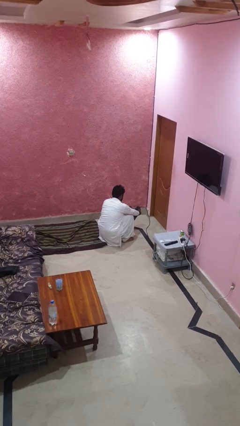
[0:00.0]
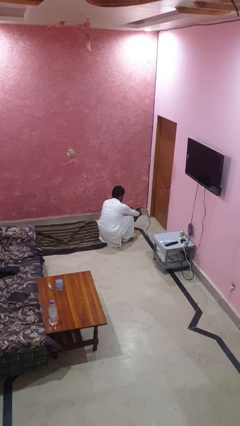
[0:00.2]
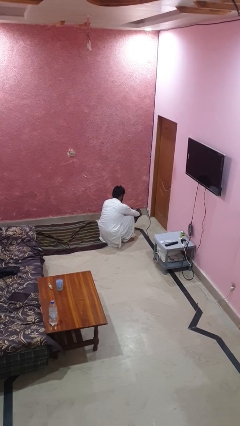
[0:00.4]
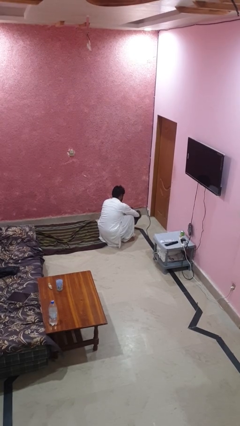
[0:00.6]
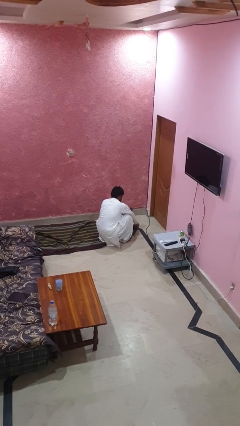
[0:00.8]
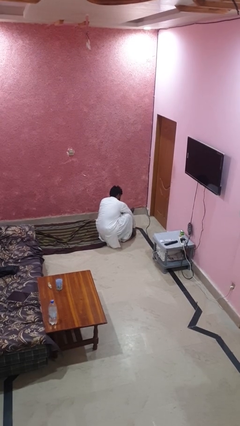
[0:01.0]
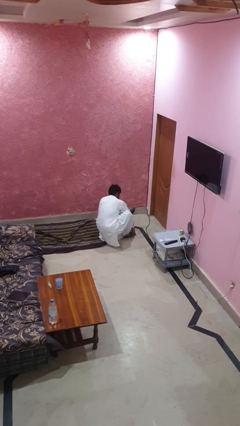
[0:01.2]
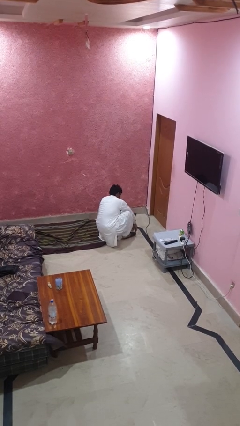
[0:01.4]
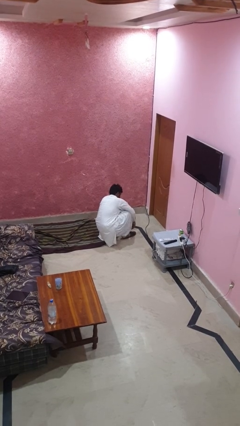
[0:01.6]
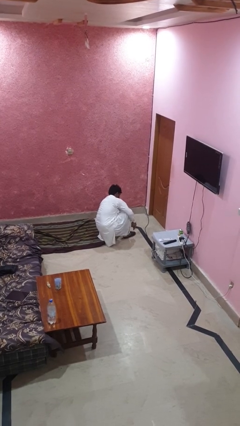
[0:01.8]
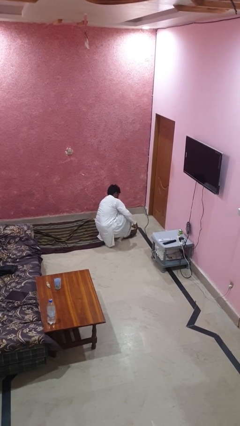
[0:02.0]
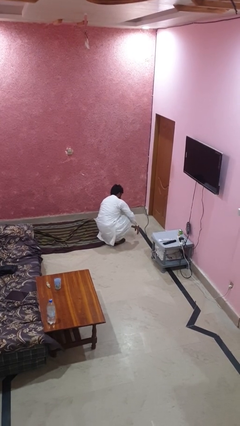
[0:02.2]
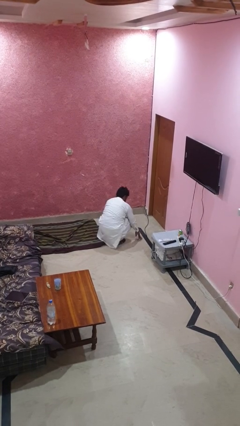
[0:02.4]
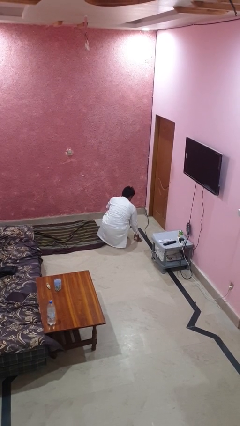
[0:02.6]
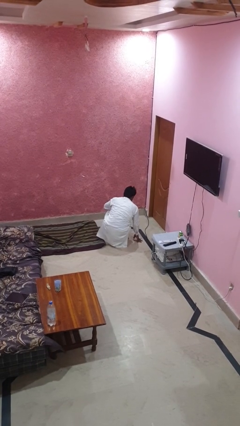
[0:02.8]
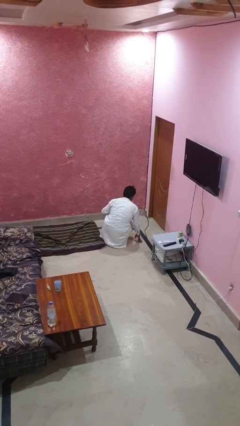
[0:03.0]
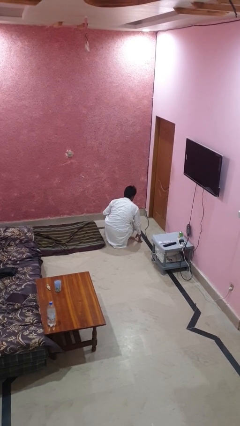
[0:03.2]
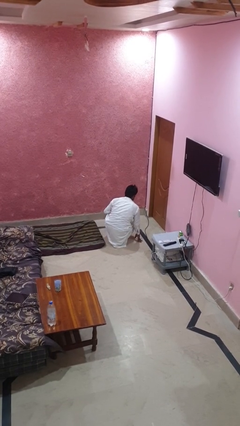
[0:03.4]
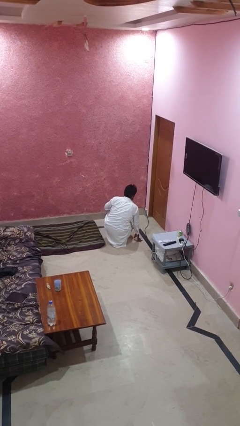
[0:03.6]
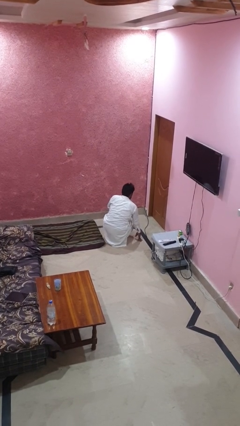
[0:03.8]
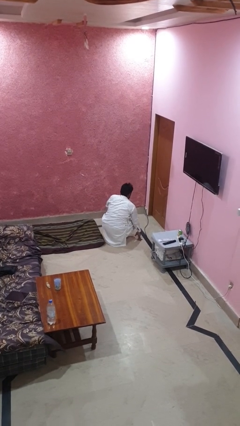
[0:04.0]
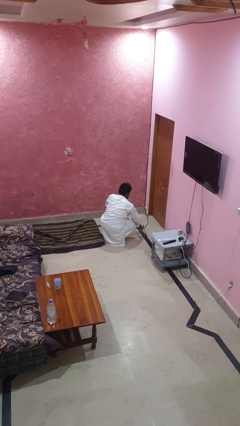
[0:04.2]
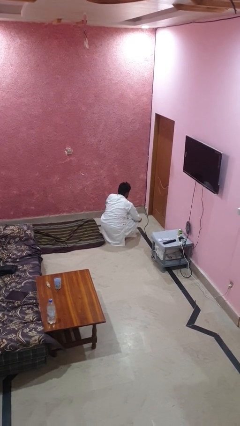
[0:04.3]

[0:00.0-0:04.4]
person puts on shoes

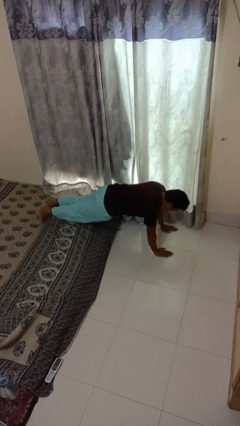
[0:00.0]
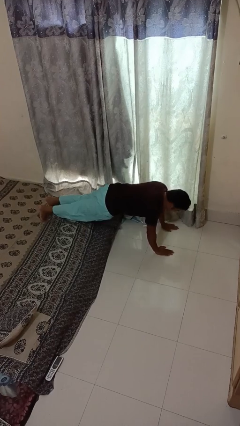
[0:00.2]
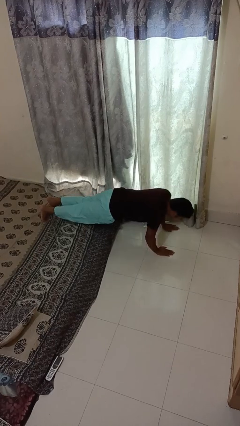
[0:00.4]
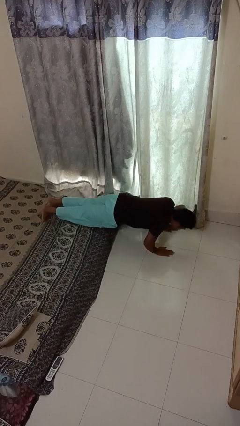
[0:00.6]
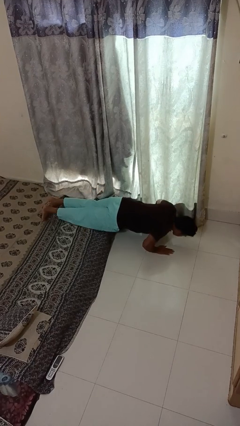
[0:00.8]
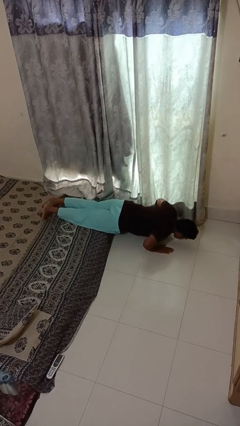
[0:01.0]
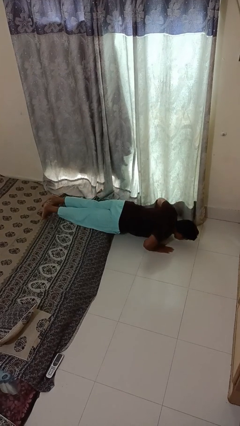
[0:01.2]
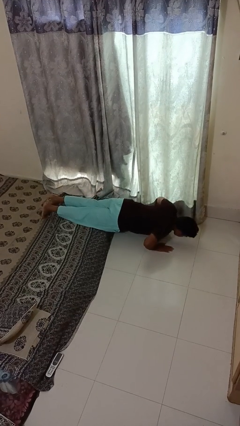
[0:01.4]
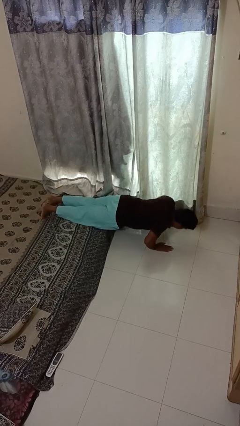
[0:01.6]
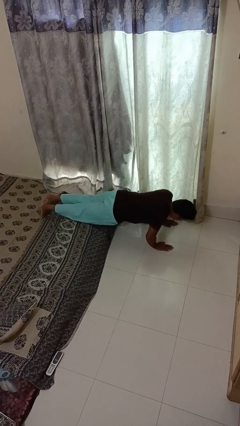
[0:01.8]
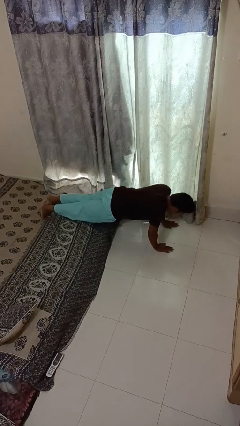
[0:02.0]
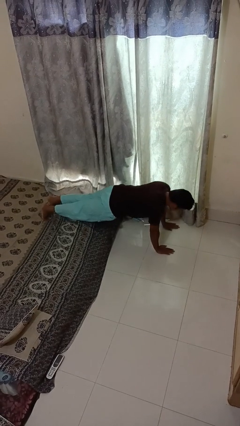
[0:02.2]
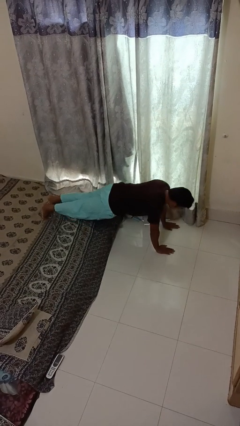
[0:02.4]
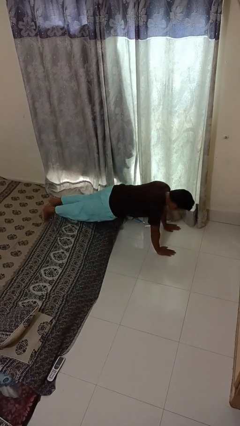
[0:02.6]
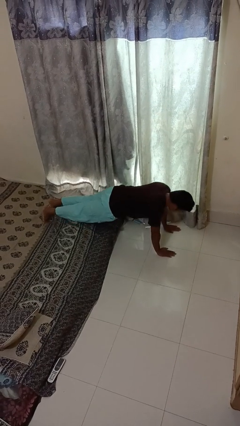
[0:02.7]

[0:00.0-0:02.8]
person exercises with pushup

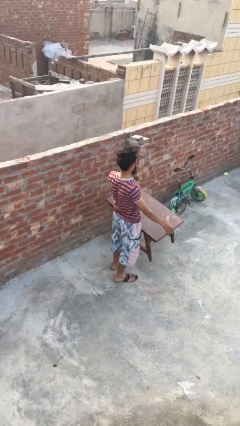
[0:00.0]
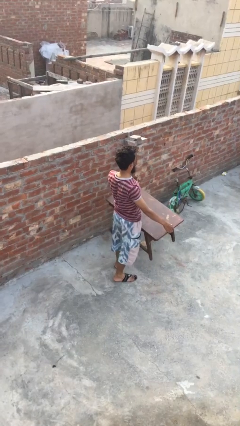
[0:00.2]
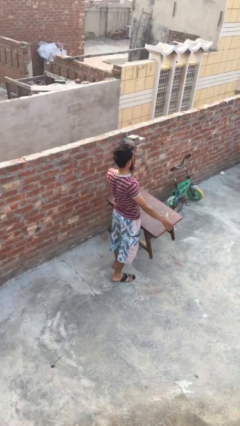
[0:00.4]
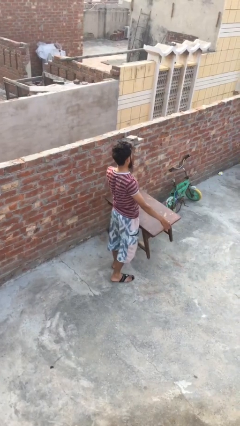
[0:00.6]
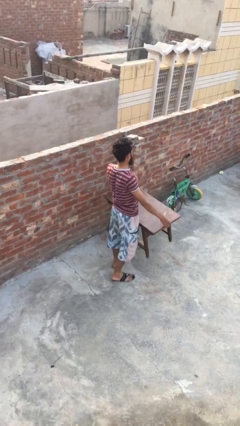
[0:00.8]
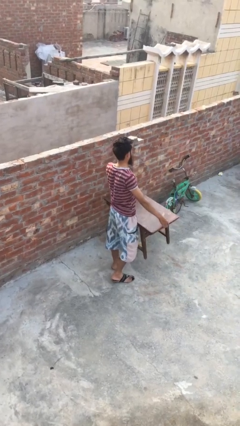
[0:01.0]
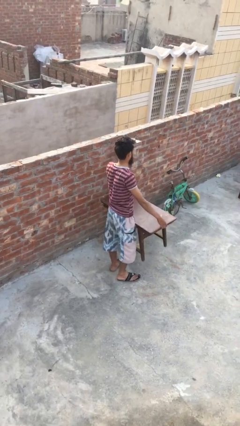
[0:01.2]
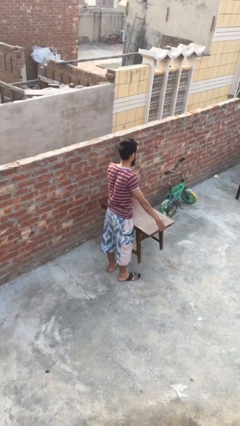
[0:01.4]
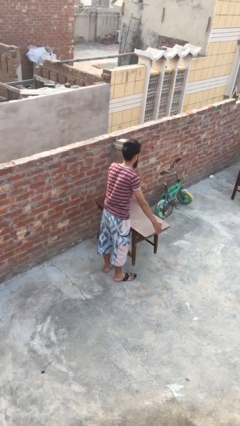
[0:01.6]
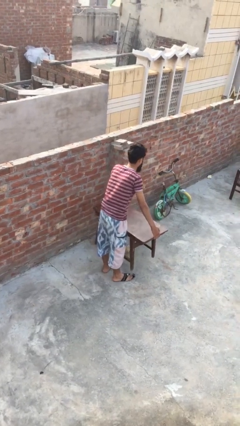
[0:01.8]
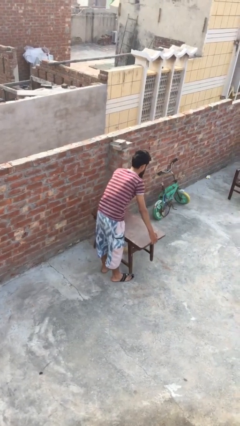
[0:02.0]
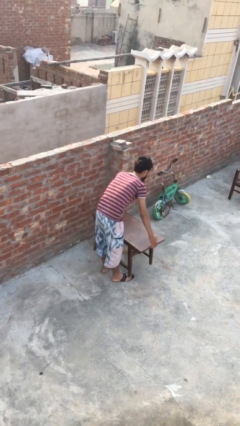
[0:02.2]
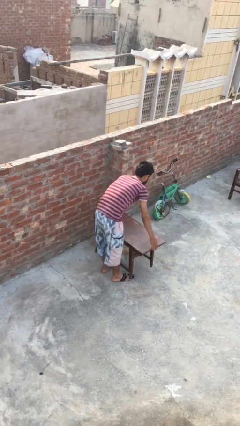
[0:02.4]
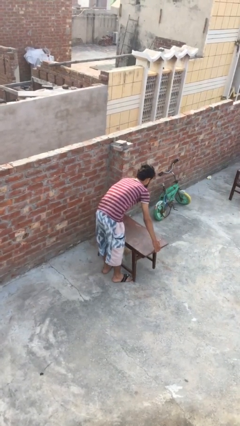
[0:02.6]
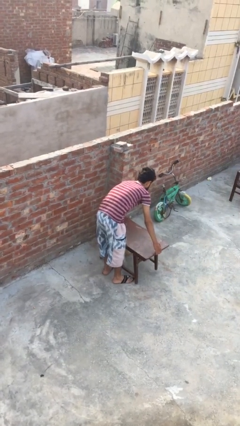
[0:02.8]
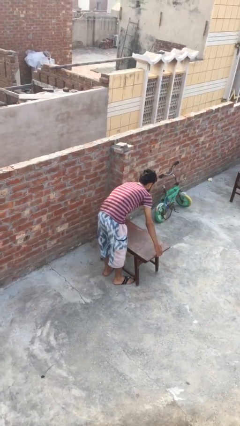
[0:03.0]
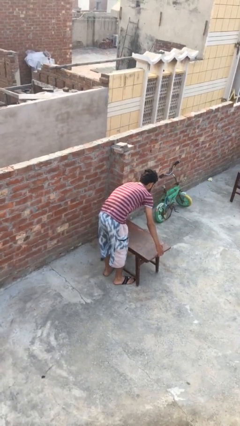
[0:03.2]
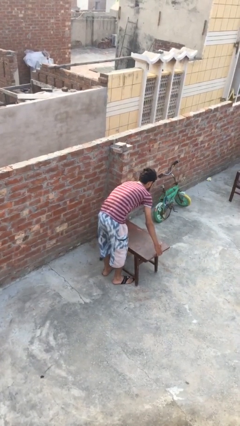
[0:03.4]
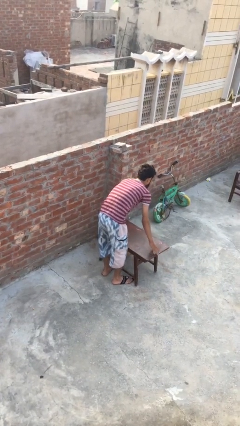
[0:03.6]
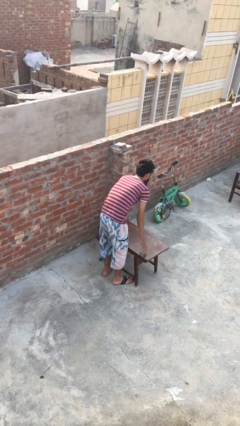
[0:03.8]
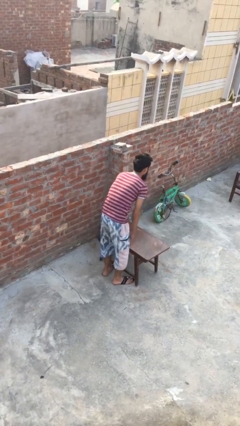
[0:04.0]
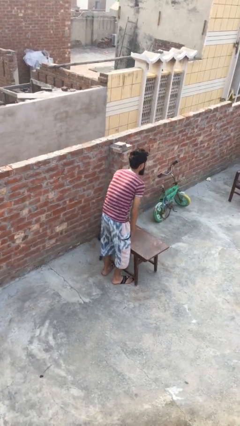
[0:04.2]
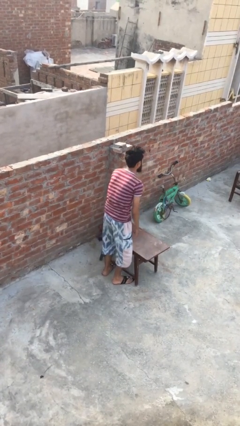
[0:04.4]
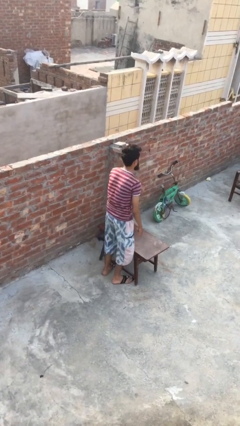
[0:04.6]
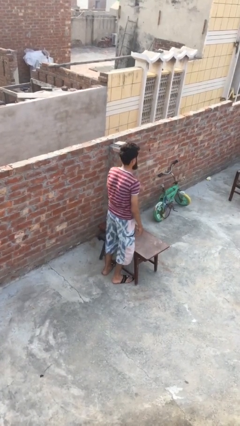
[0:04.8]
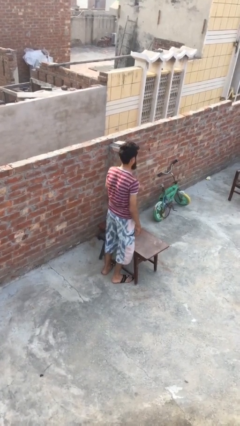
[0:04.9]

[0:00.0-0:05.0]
person puts down object on floor

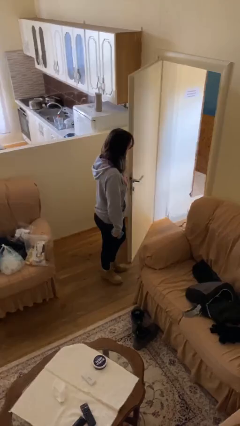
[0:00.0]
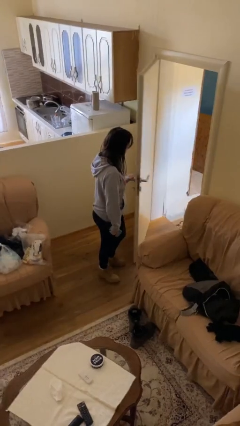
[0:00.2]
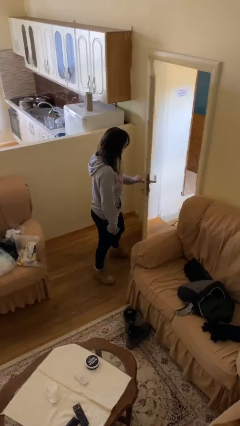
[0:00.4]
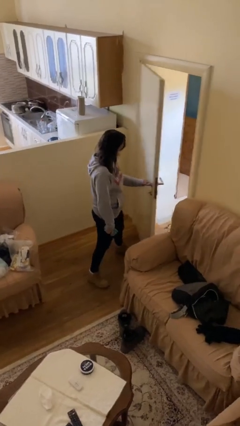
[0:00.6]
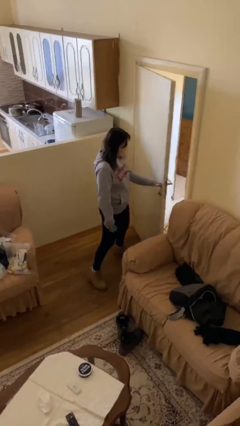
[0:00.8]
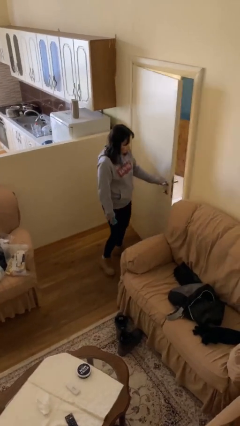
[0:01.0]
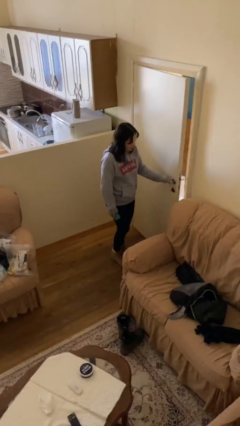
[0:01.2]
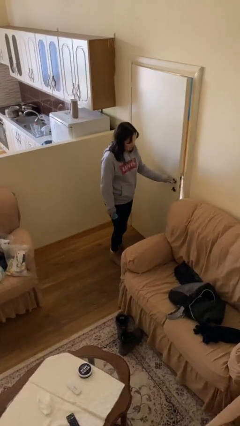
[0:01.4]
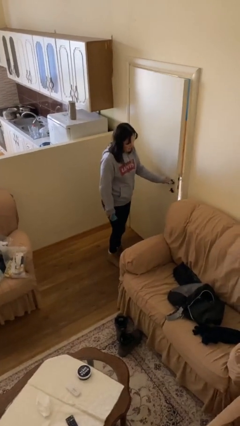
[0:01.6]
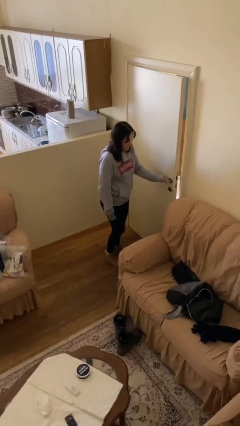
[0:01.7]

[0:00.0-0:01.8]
person closes facility door

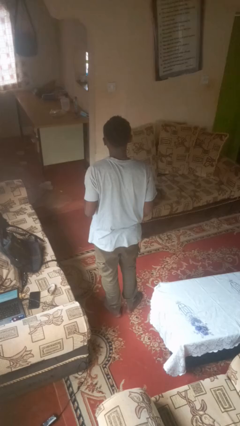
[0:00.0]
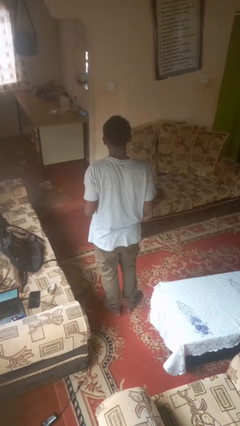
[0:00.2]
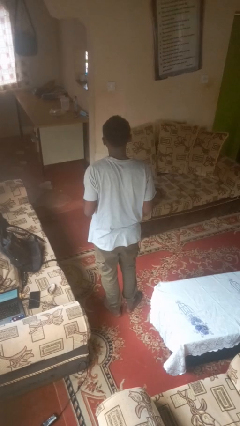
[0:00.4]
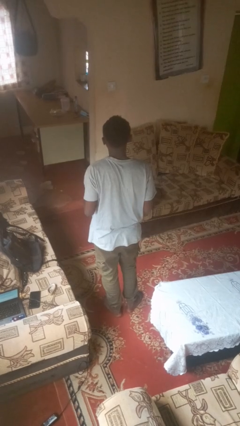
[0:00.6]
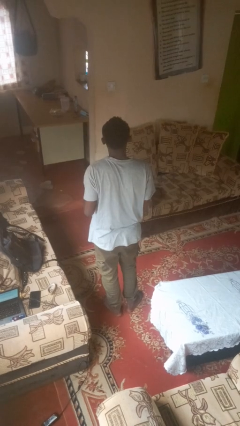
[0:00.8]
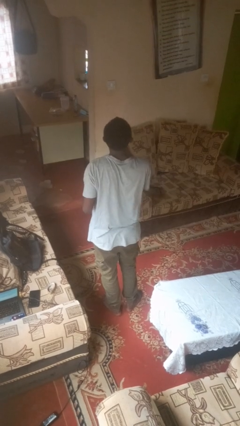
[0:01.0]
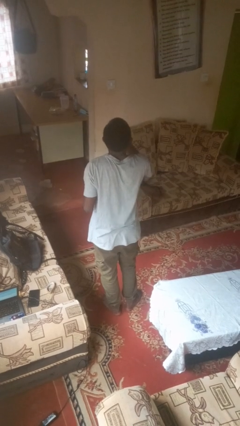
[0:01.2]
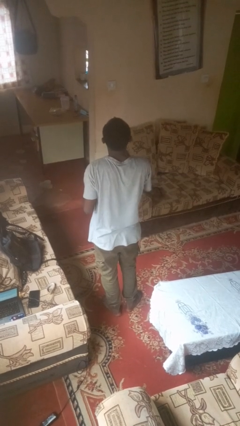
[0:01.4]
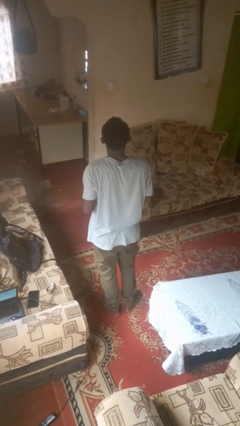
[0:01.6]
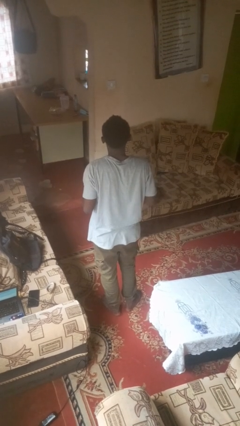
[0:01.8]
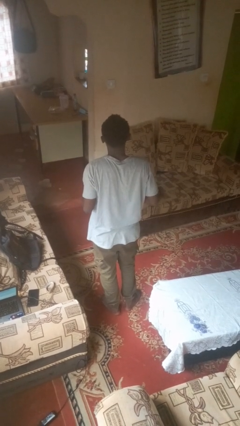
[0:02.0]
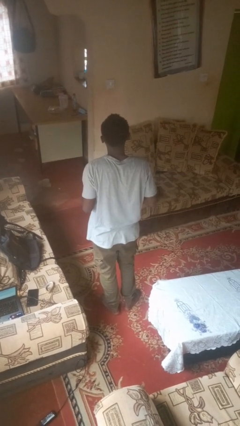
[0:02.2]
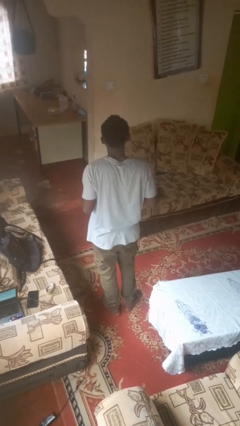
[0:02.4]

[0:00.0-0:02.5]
person takes medicine pills

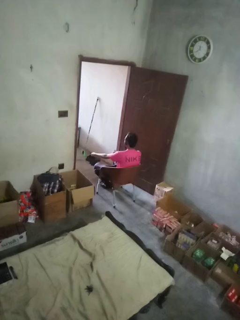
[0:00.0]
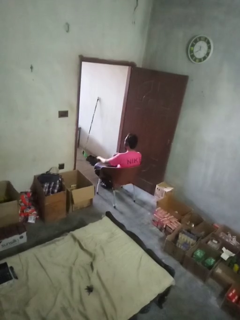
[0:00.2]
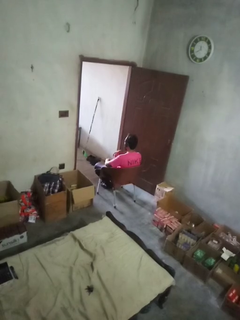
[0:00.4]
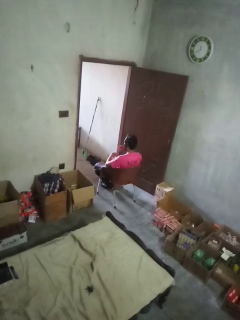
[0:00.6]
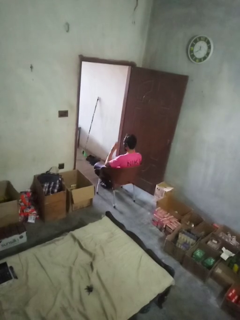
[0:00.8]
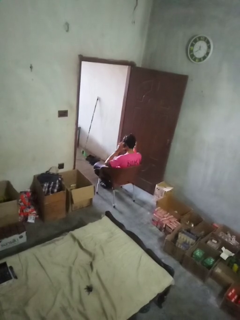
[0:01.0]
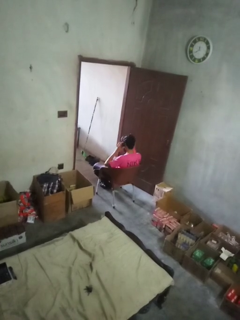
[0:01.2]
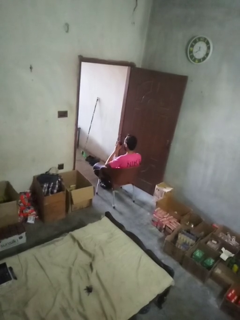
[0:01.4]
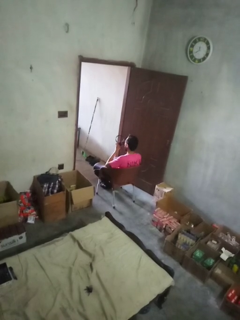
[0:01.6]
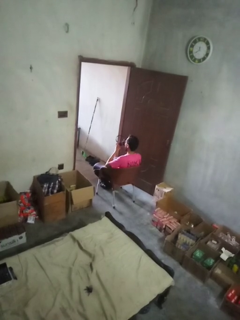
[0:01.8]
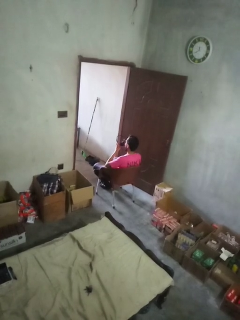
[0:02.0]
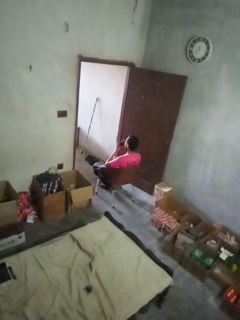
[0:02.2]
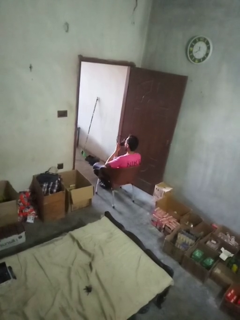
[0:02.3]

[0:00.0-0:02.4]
person takes off headphones
